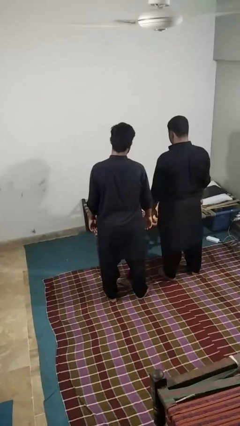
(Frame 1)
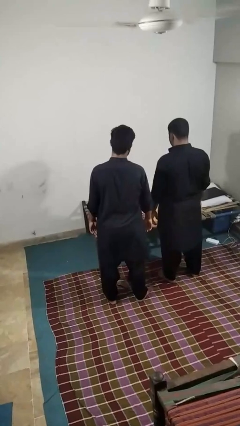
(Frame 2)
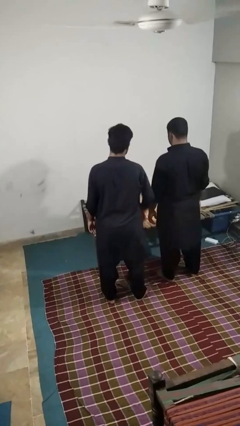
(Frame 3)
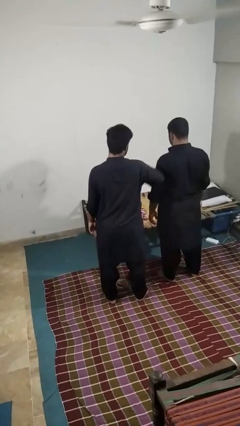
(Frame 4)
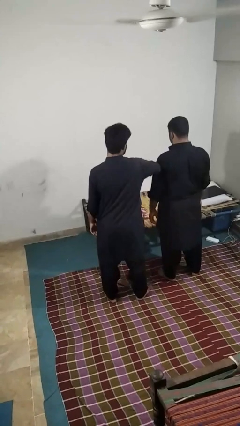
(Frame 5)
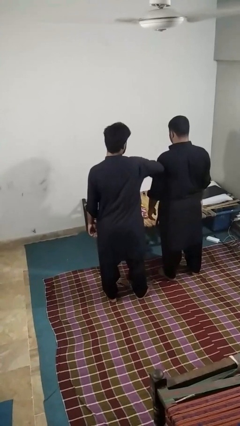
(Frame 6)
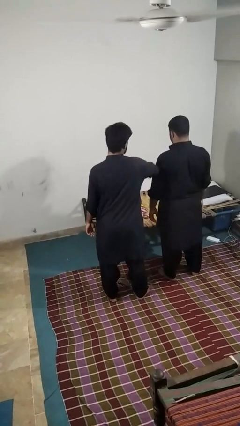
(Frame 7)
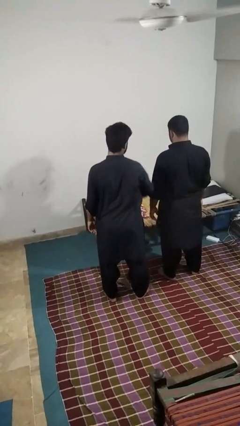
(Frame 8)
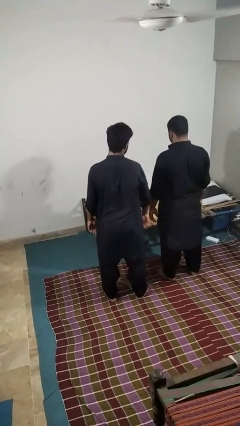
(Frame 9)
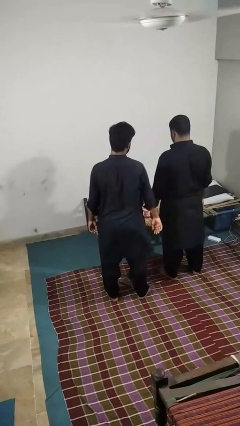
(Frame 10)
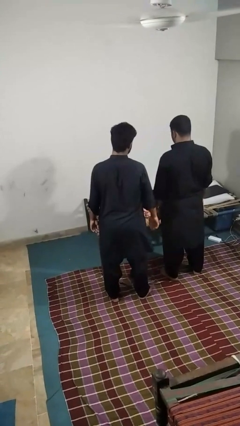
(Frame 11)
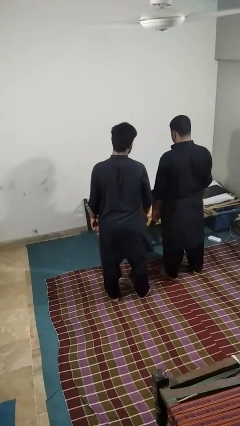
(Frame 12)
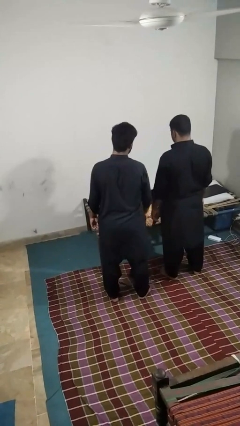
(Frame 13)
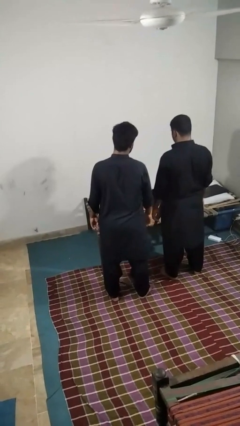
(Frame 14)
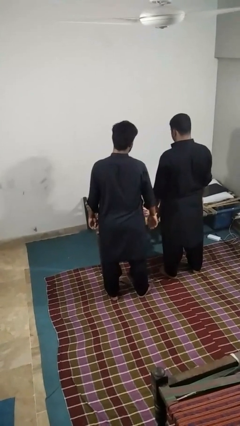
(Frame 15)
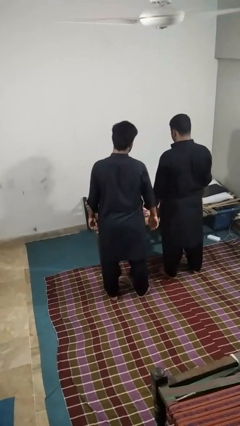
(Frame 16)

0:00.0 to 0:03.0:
person nudges person with elbow

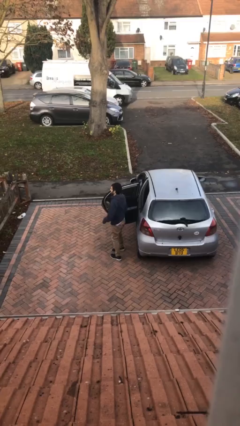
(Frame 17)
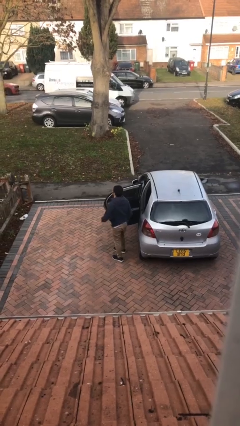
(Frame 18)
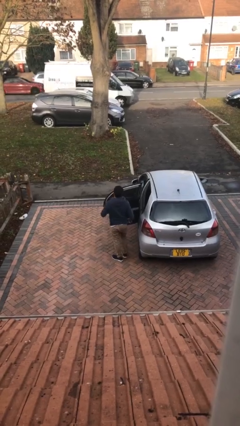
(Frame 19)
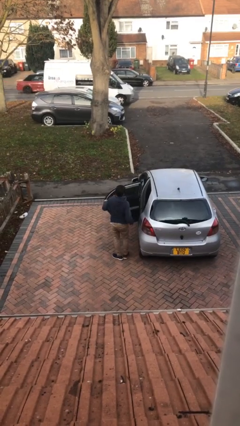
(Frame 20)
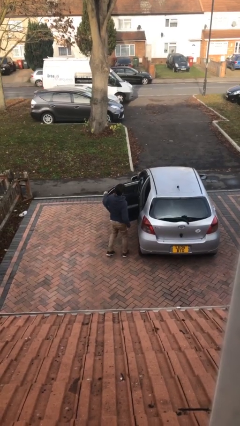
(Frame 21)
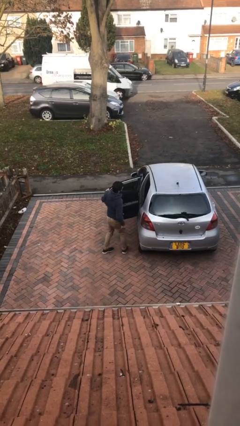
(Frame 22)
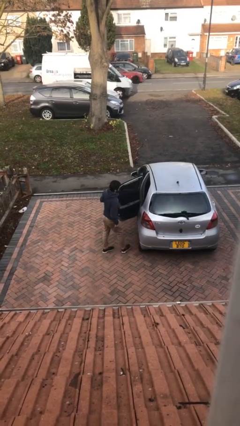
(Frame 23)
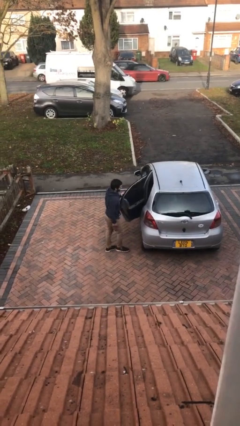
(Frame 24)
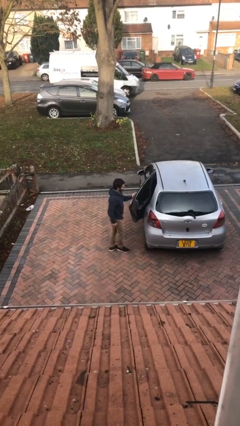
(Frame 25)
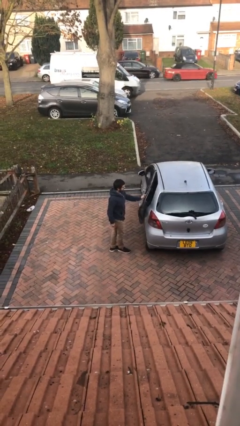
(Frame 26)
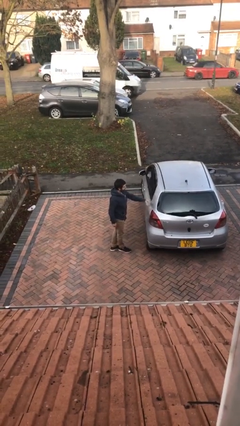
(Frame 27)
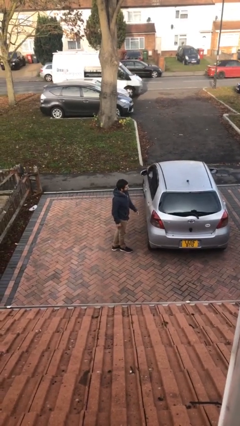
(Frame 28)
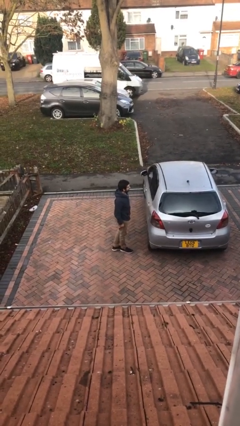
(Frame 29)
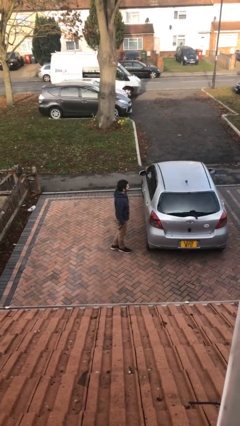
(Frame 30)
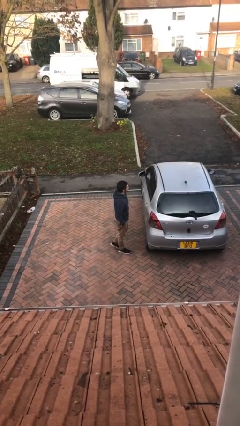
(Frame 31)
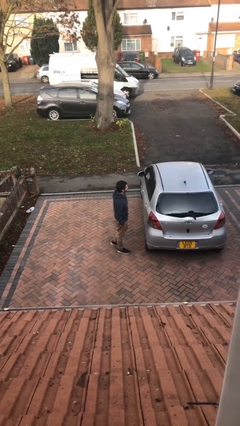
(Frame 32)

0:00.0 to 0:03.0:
person closes car door

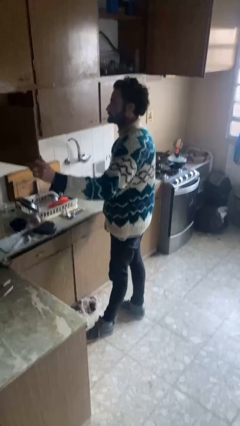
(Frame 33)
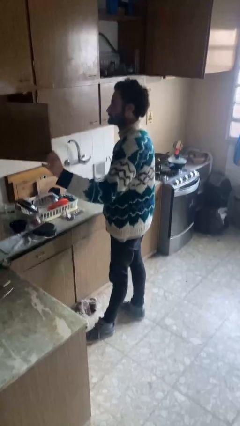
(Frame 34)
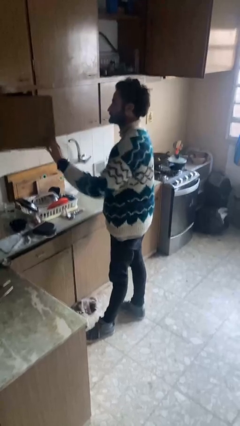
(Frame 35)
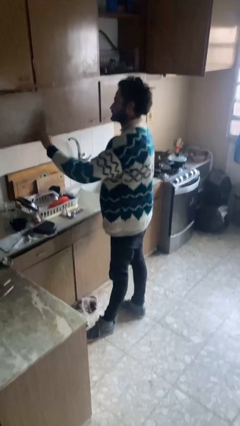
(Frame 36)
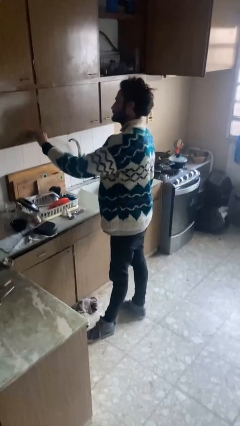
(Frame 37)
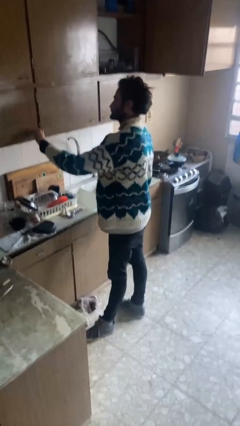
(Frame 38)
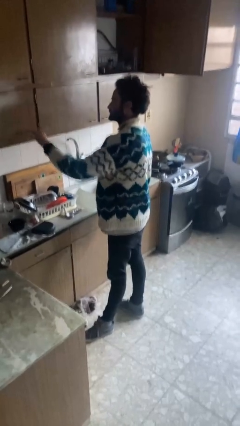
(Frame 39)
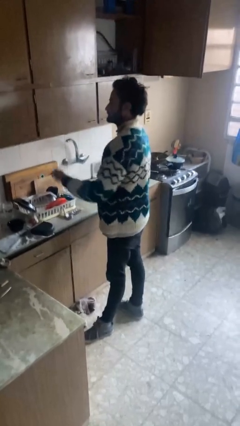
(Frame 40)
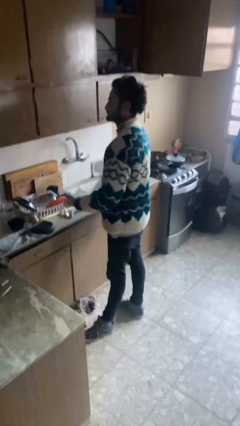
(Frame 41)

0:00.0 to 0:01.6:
person closes cabinet

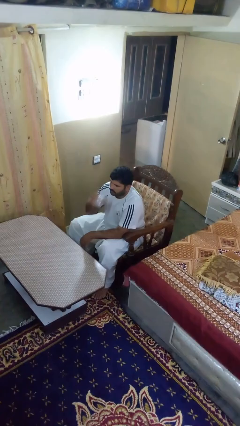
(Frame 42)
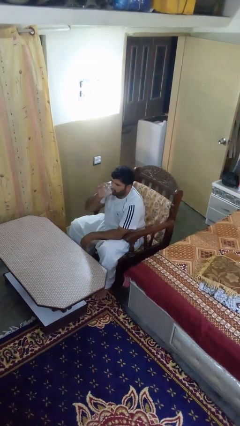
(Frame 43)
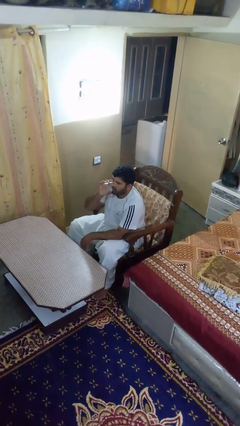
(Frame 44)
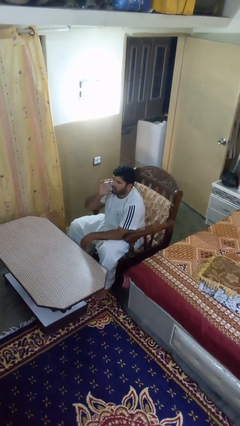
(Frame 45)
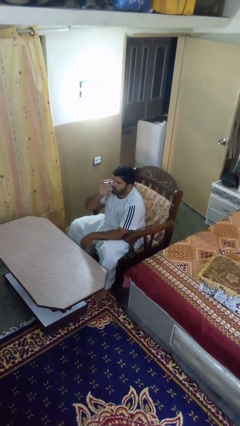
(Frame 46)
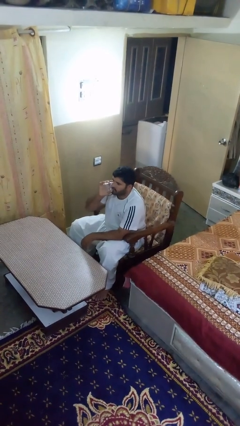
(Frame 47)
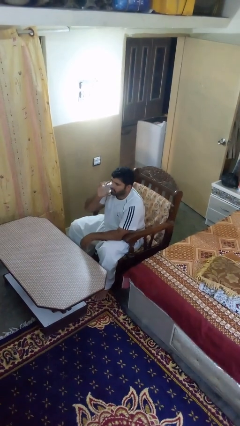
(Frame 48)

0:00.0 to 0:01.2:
person drinks from shotglass

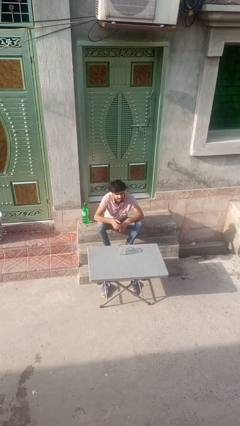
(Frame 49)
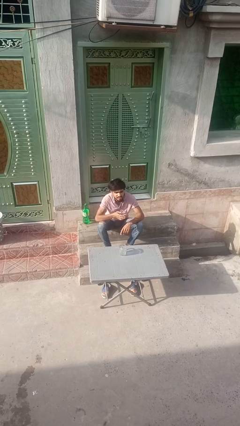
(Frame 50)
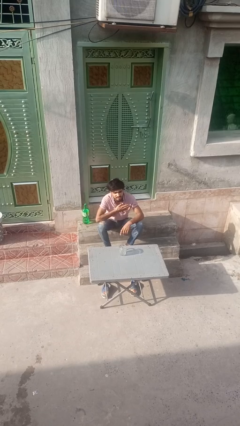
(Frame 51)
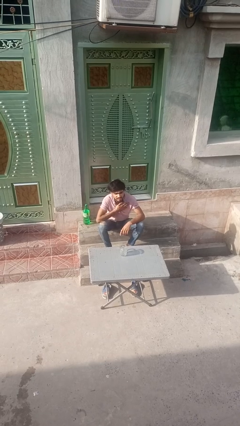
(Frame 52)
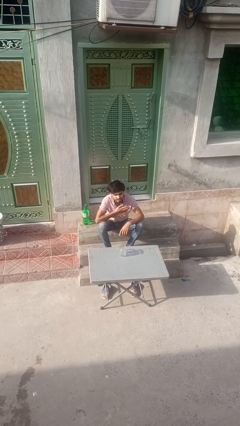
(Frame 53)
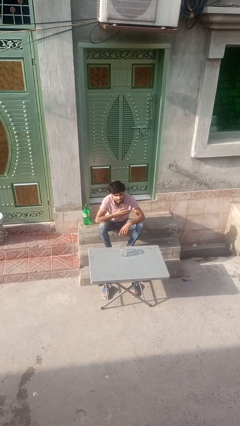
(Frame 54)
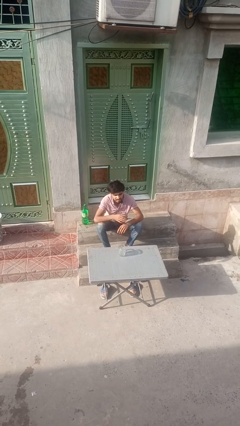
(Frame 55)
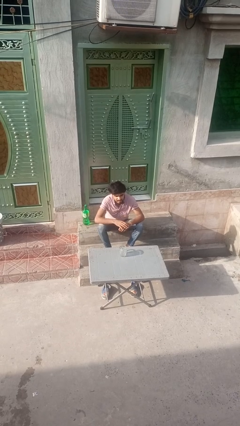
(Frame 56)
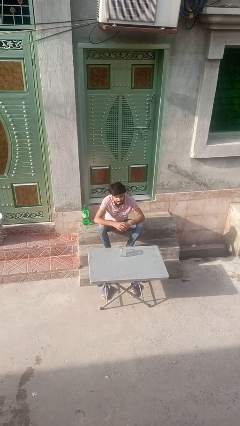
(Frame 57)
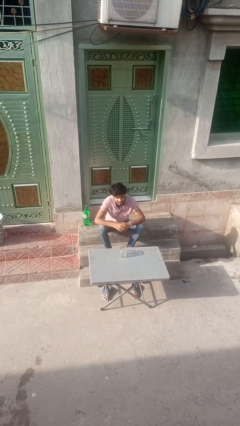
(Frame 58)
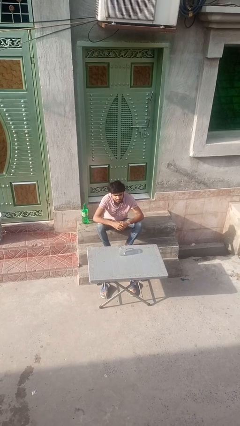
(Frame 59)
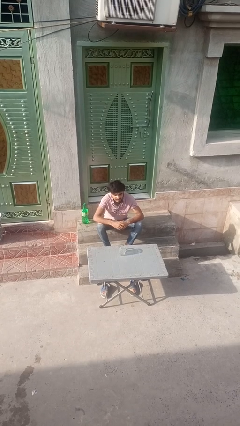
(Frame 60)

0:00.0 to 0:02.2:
person drums on chest

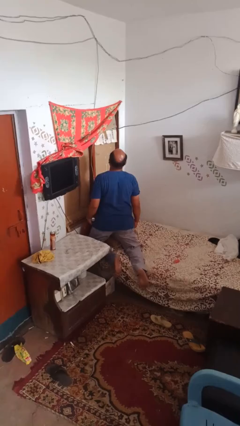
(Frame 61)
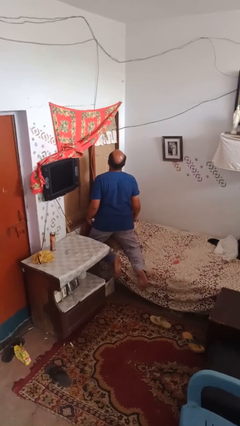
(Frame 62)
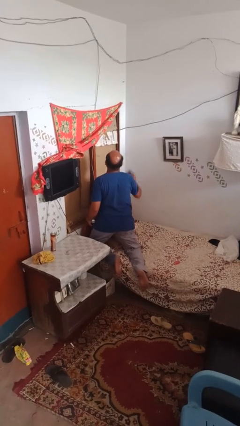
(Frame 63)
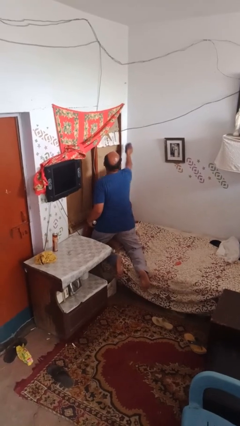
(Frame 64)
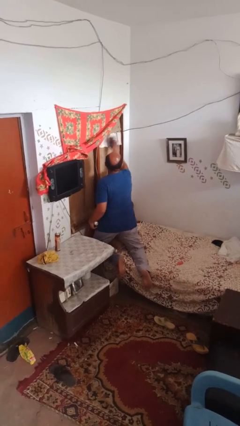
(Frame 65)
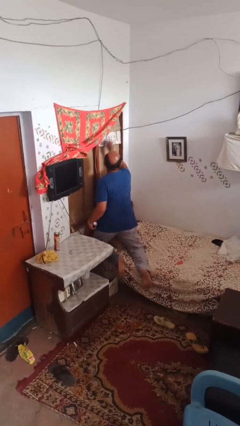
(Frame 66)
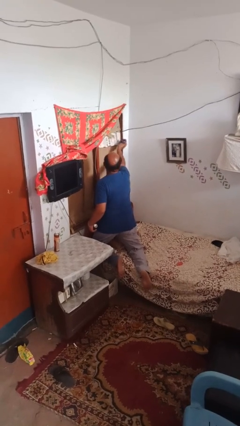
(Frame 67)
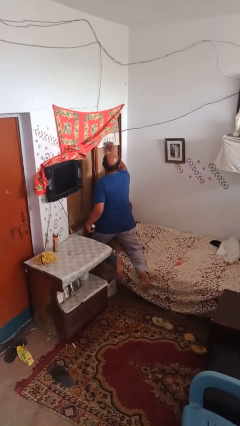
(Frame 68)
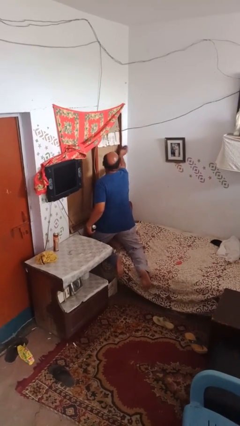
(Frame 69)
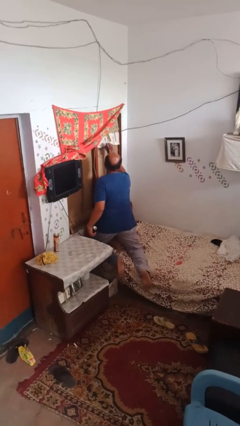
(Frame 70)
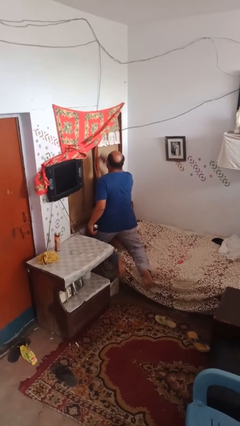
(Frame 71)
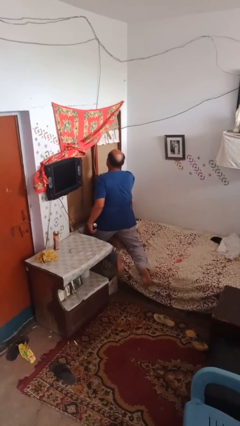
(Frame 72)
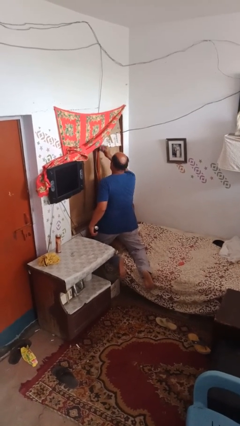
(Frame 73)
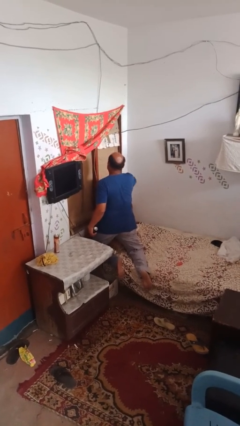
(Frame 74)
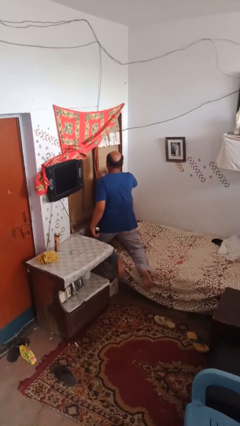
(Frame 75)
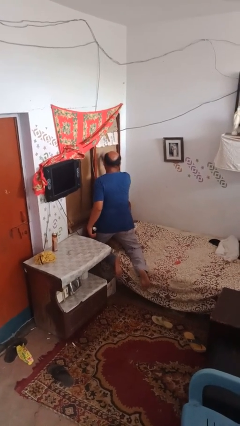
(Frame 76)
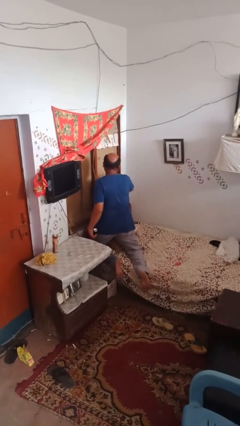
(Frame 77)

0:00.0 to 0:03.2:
person washes window

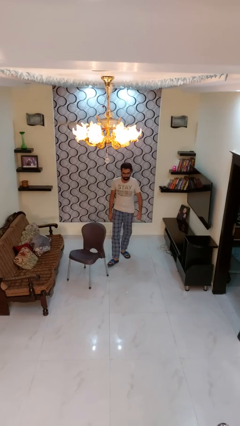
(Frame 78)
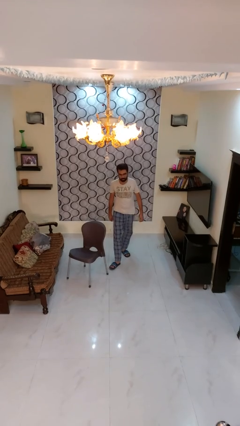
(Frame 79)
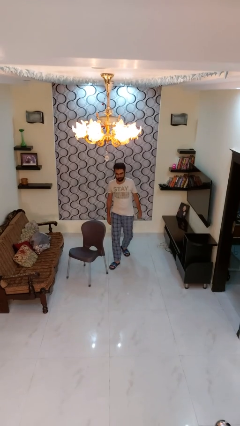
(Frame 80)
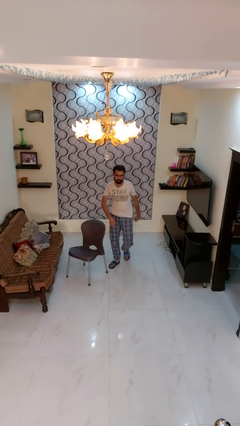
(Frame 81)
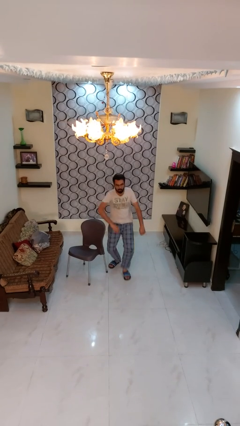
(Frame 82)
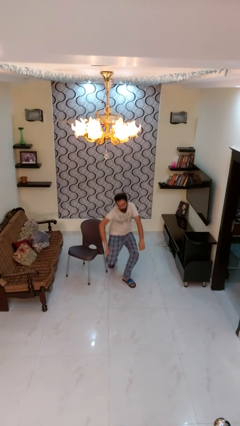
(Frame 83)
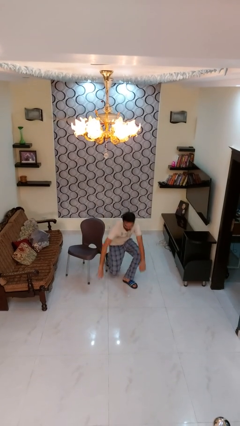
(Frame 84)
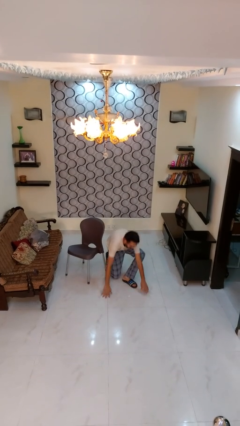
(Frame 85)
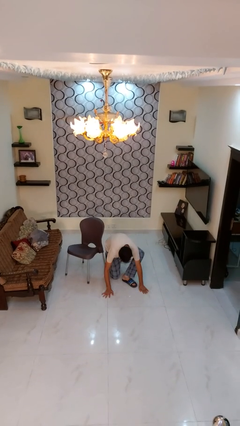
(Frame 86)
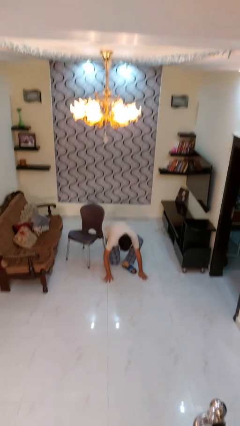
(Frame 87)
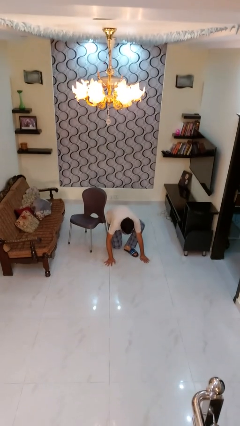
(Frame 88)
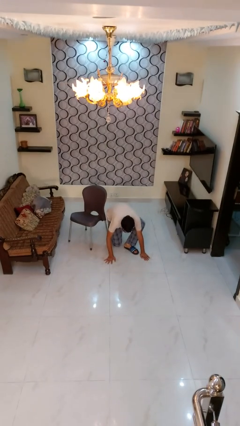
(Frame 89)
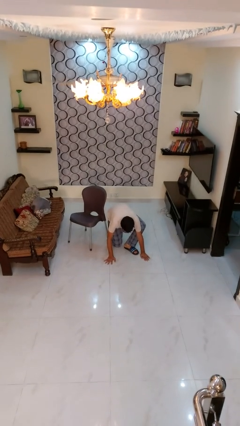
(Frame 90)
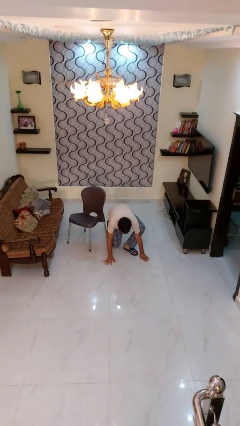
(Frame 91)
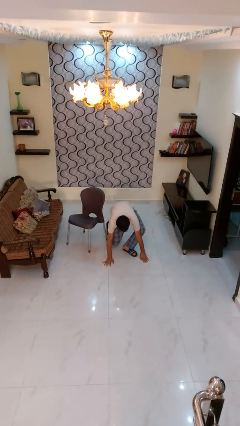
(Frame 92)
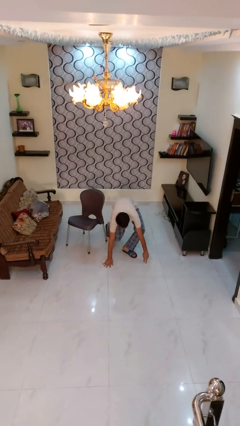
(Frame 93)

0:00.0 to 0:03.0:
person trips on object on floor
